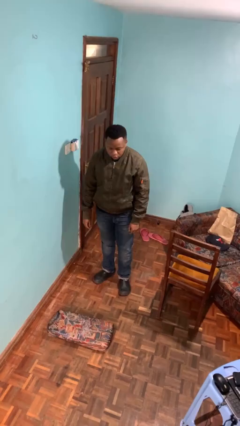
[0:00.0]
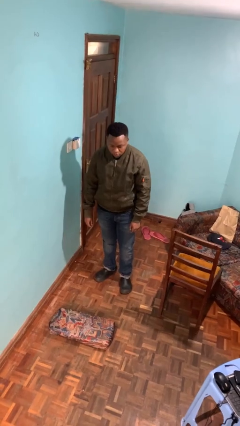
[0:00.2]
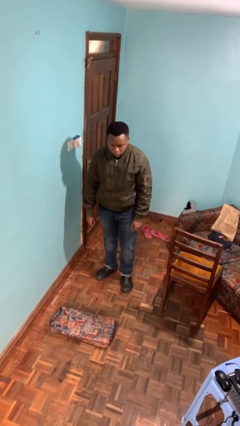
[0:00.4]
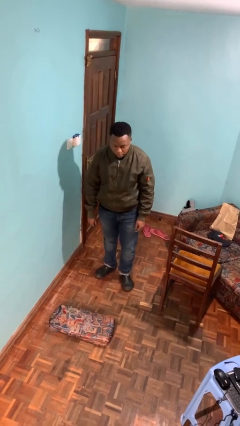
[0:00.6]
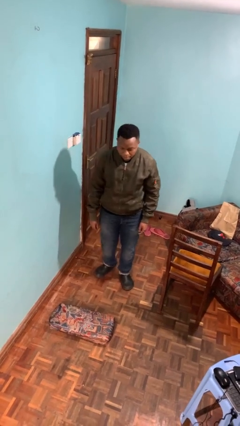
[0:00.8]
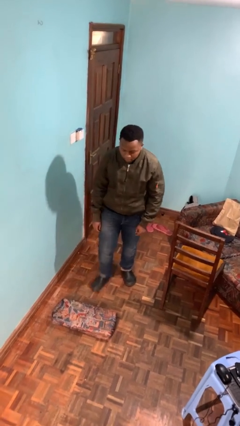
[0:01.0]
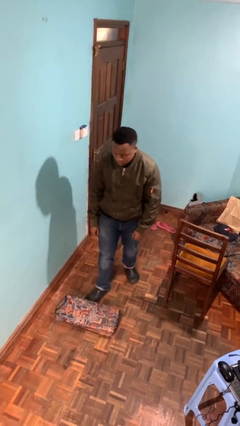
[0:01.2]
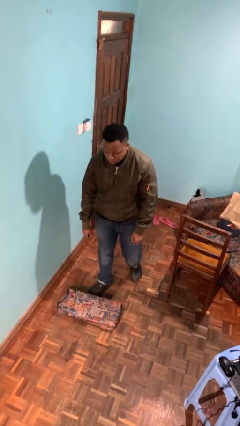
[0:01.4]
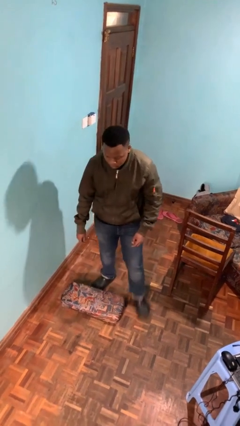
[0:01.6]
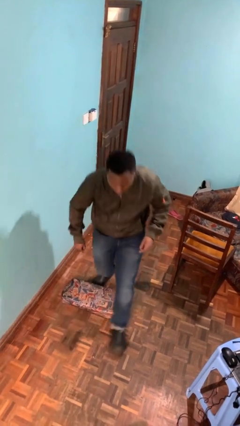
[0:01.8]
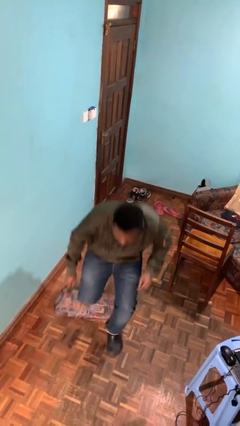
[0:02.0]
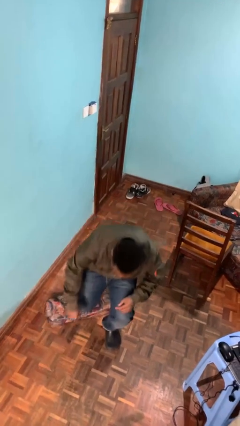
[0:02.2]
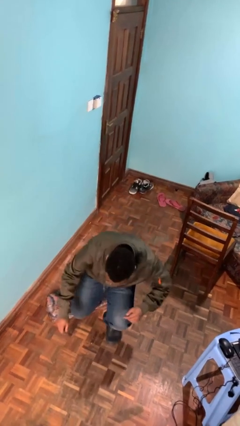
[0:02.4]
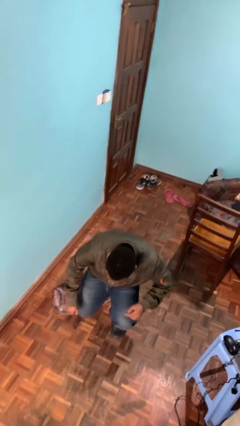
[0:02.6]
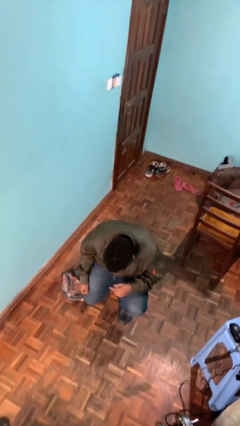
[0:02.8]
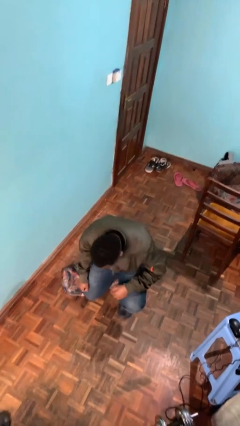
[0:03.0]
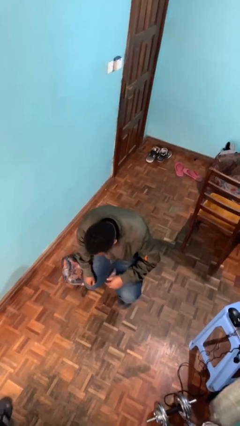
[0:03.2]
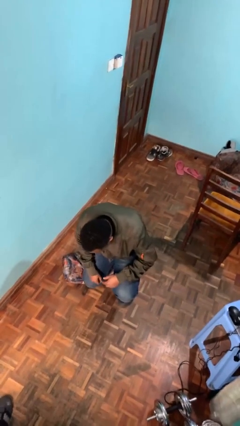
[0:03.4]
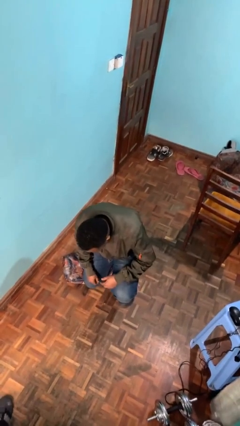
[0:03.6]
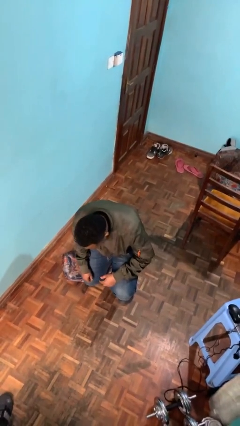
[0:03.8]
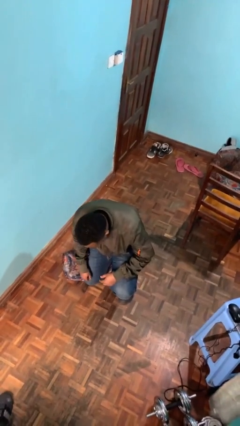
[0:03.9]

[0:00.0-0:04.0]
person trips on object on floor

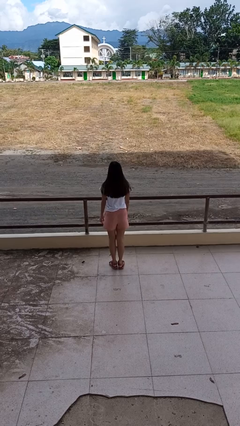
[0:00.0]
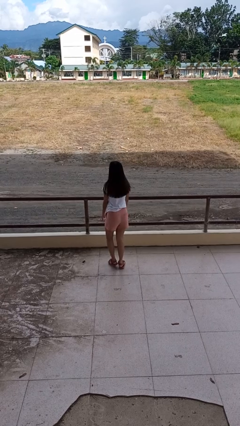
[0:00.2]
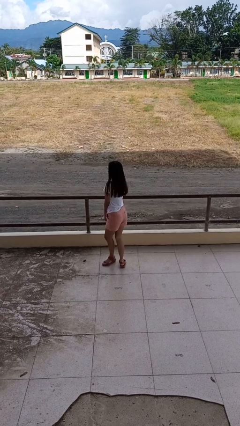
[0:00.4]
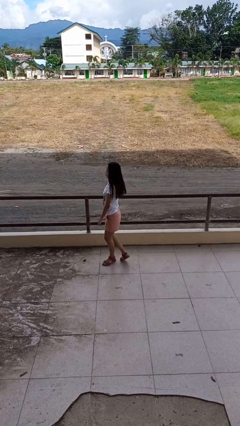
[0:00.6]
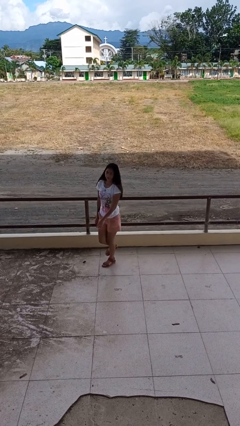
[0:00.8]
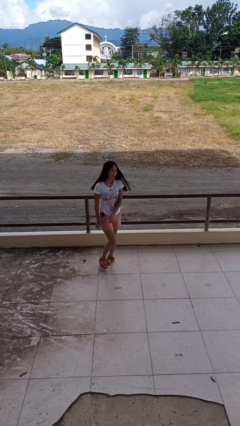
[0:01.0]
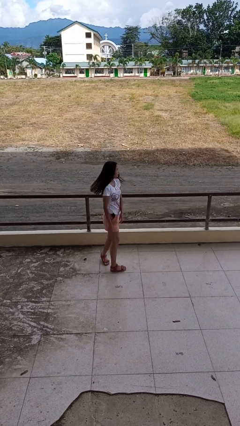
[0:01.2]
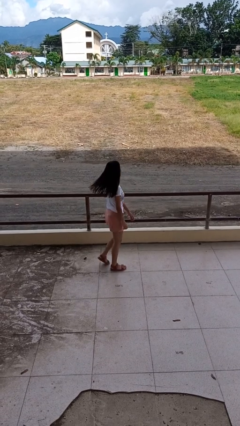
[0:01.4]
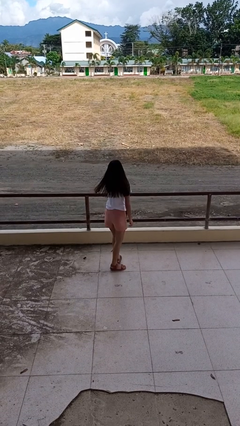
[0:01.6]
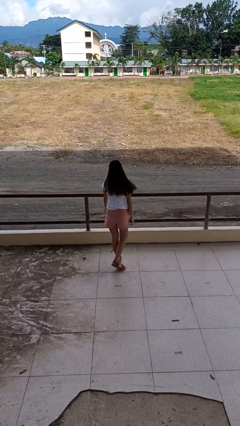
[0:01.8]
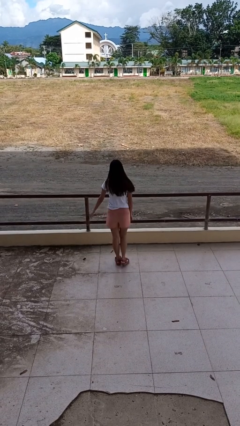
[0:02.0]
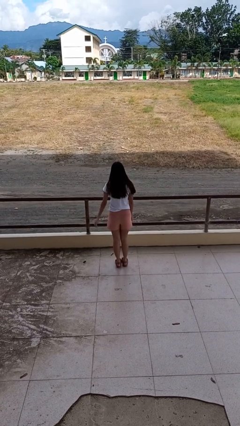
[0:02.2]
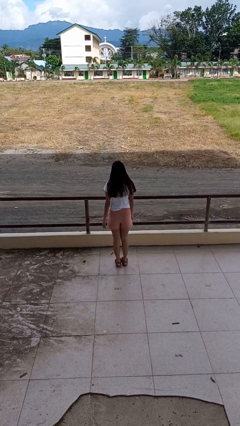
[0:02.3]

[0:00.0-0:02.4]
person twirls

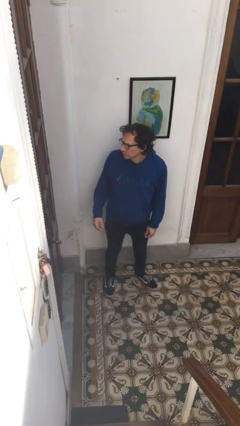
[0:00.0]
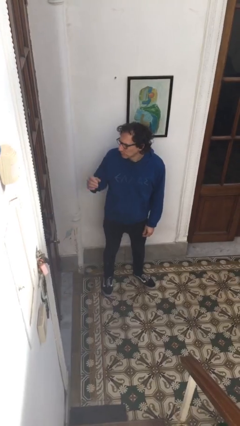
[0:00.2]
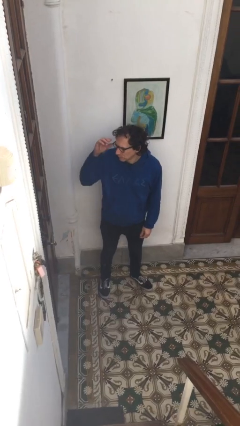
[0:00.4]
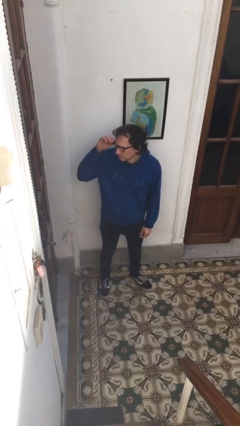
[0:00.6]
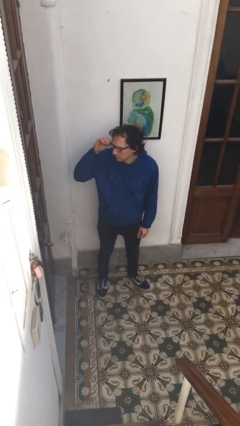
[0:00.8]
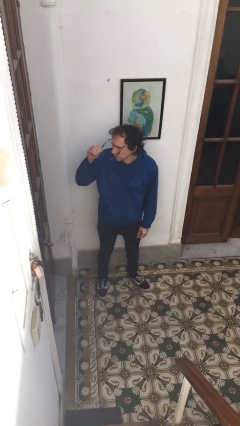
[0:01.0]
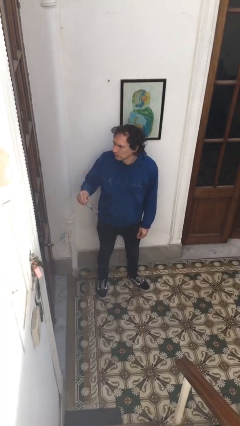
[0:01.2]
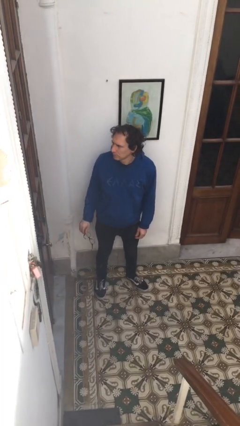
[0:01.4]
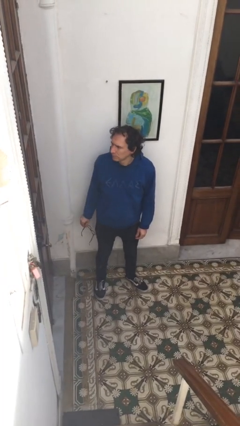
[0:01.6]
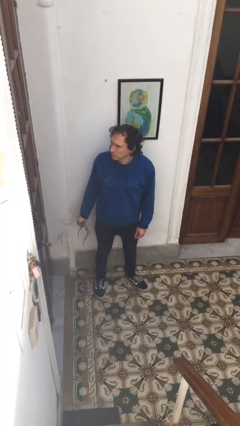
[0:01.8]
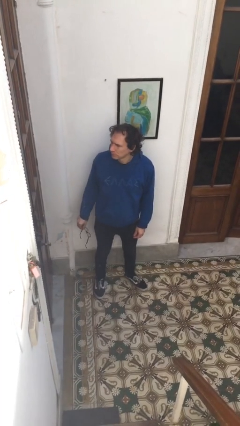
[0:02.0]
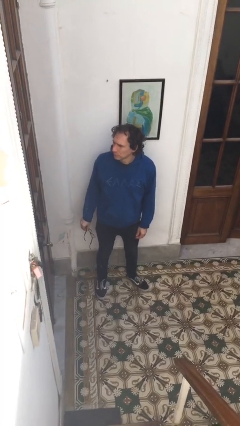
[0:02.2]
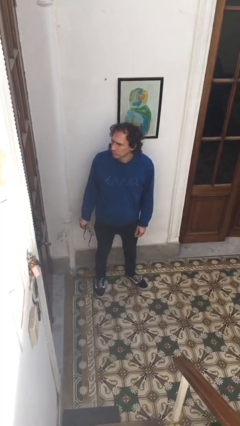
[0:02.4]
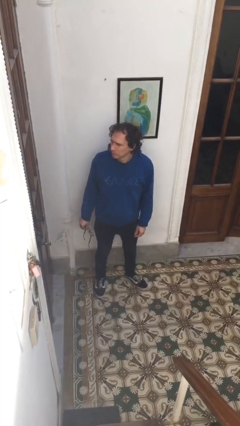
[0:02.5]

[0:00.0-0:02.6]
person takes off glasses

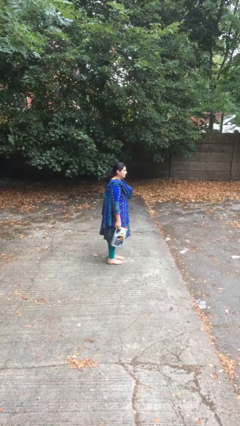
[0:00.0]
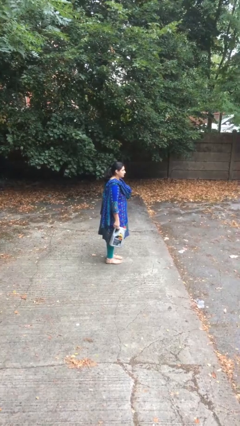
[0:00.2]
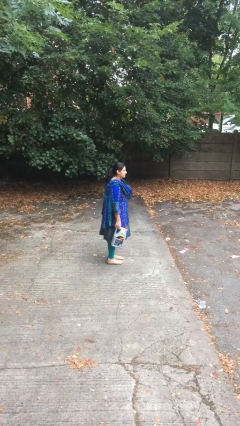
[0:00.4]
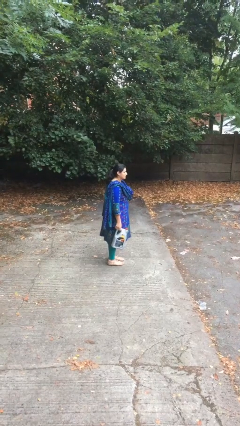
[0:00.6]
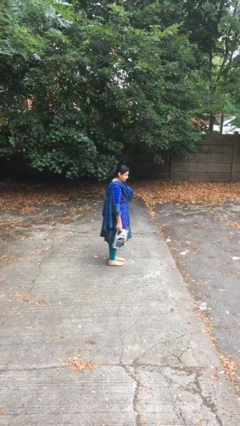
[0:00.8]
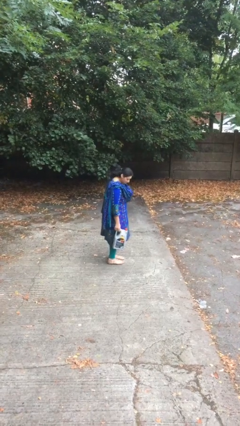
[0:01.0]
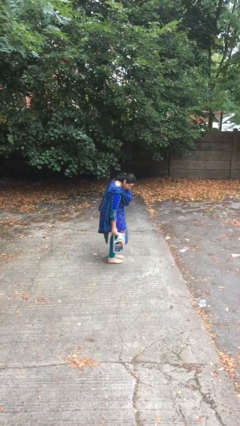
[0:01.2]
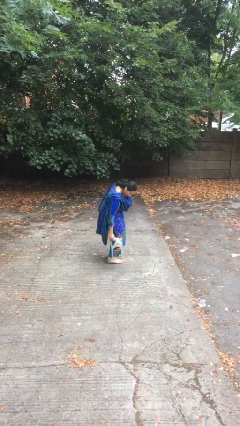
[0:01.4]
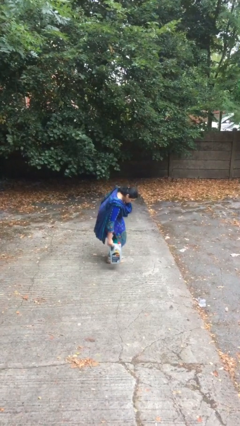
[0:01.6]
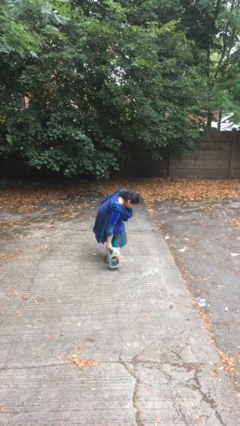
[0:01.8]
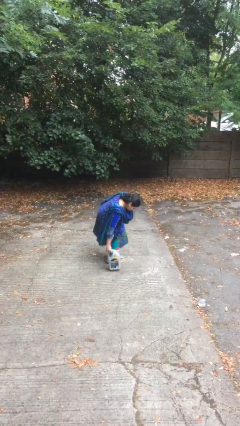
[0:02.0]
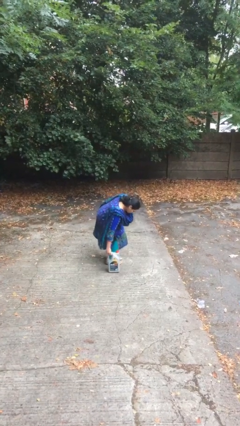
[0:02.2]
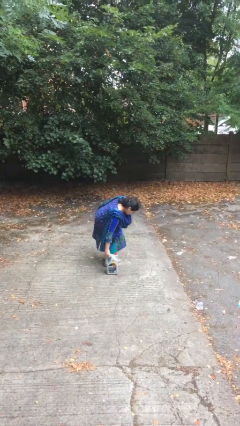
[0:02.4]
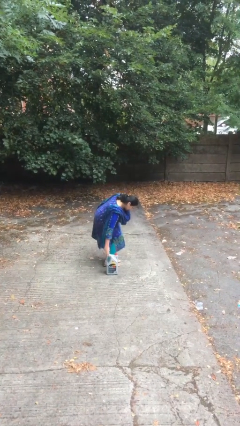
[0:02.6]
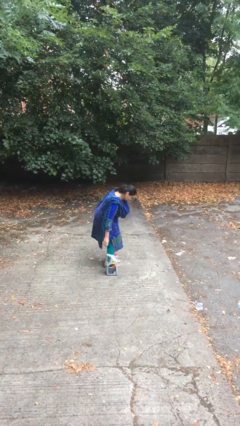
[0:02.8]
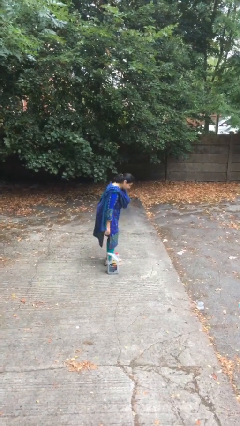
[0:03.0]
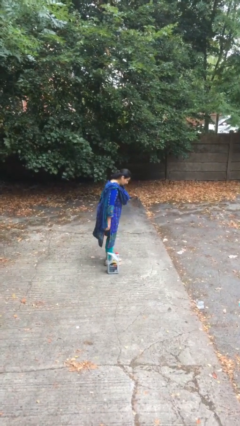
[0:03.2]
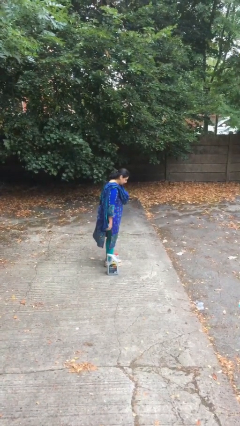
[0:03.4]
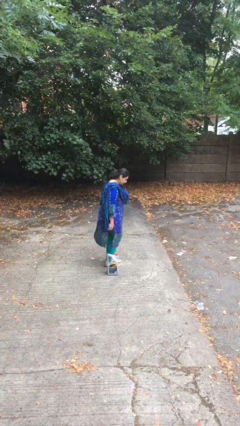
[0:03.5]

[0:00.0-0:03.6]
person puts down object on floor

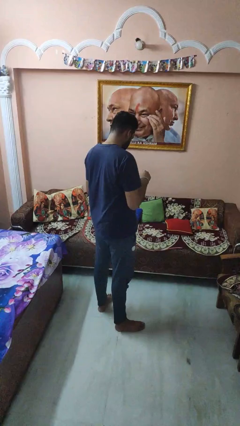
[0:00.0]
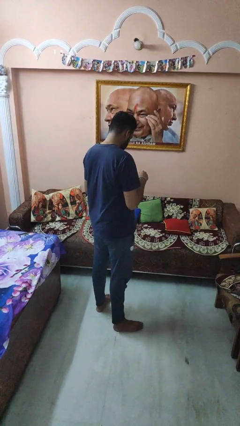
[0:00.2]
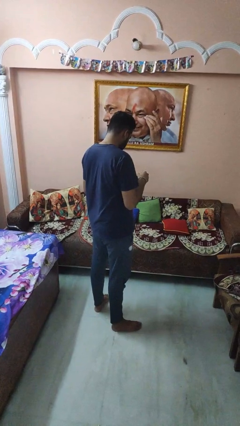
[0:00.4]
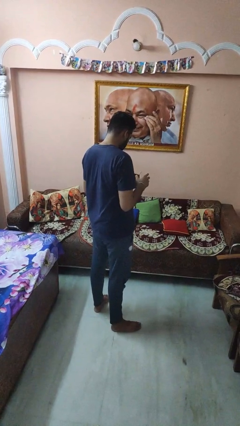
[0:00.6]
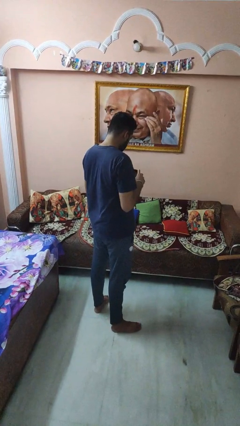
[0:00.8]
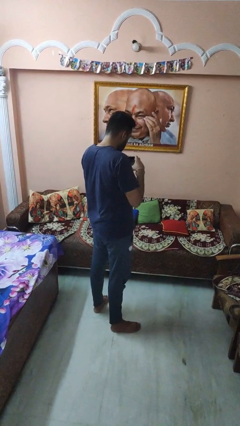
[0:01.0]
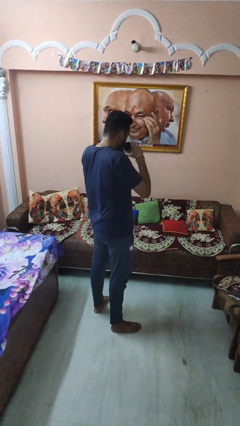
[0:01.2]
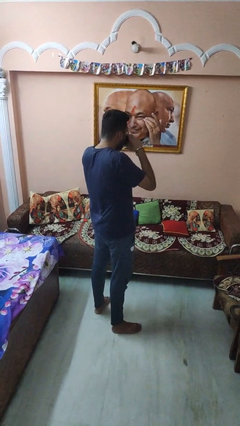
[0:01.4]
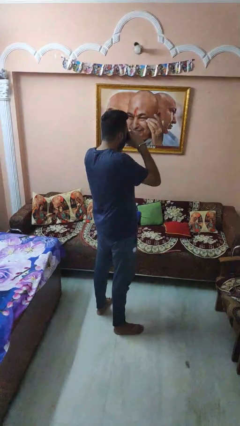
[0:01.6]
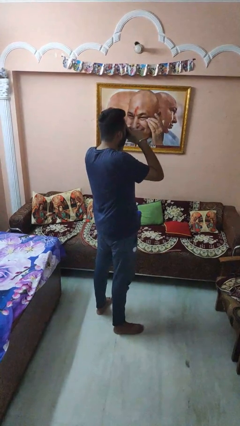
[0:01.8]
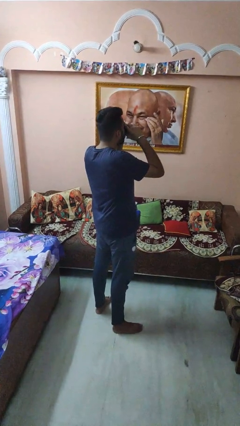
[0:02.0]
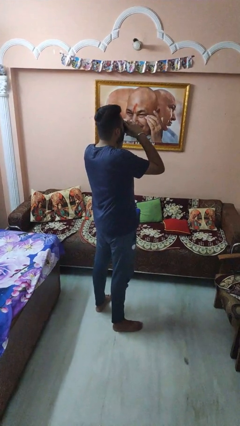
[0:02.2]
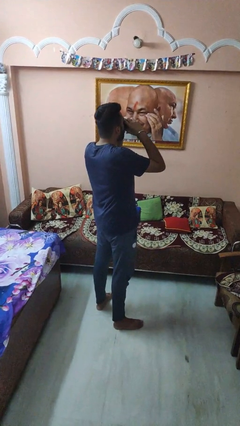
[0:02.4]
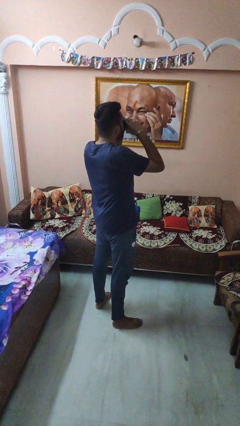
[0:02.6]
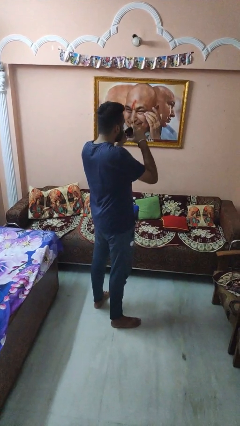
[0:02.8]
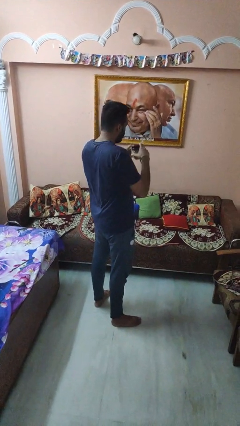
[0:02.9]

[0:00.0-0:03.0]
person drinks from mug

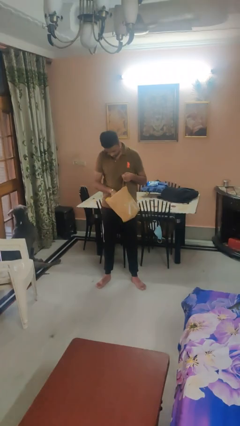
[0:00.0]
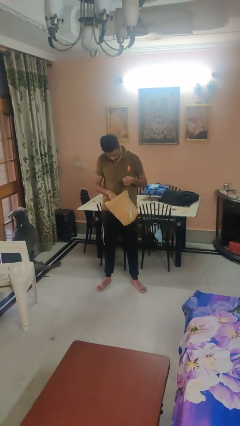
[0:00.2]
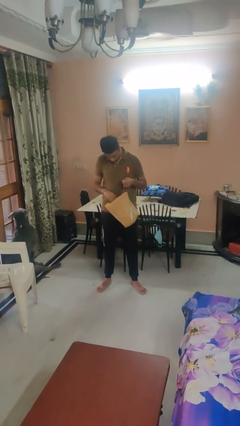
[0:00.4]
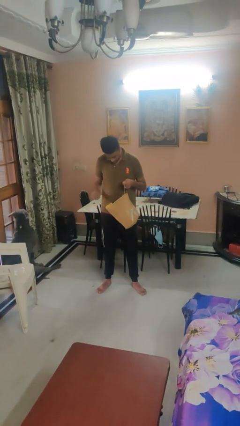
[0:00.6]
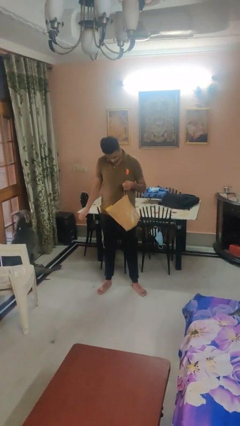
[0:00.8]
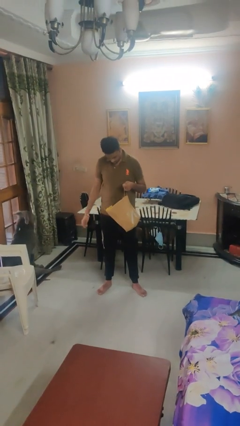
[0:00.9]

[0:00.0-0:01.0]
person puts object into bag

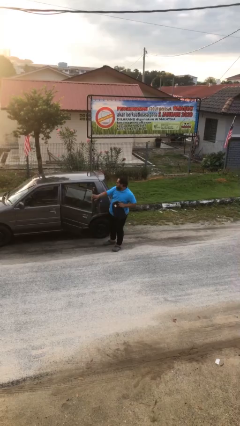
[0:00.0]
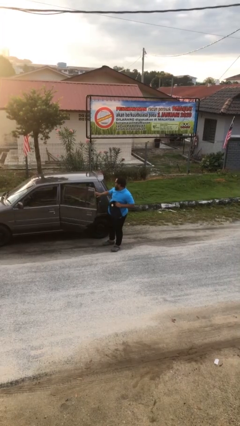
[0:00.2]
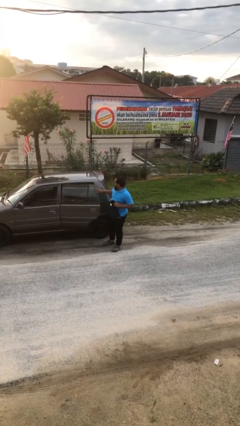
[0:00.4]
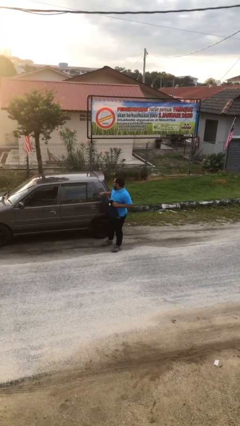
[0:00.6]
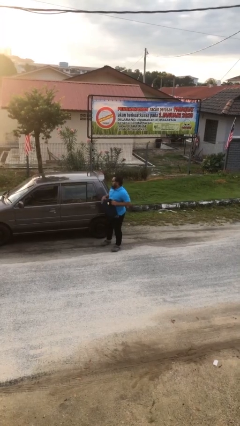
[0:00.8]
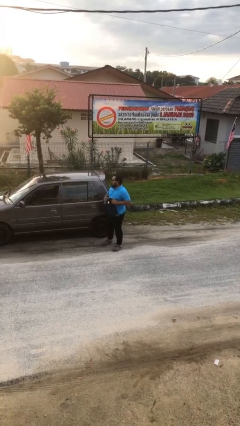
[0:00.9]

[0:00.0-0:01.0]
person closes car door
